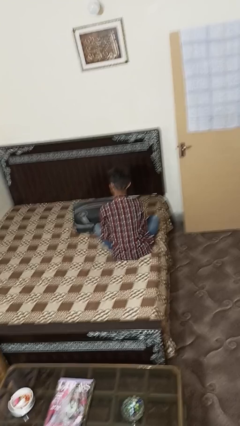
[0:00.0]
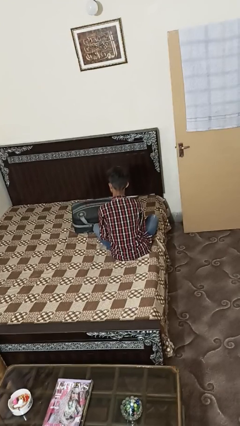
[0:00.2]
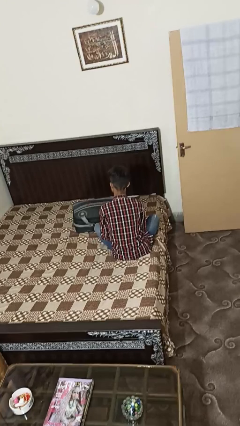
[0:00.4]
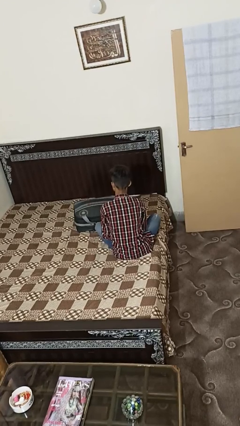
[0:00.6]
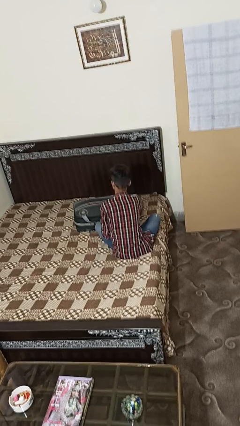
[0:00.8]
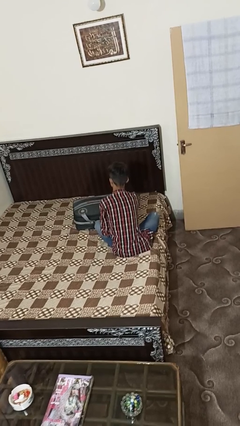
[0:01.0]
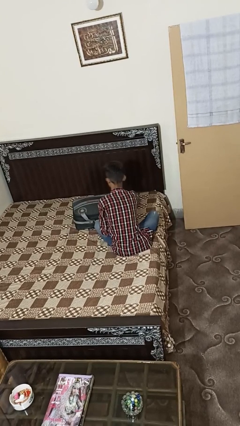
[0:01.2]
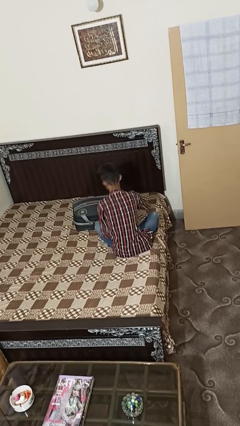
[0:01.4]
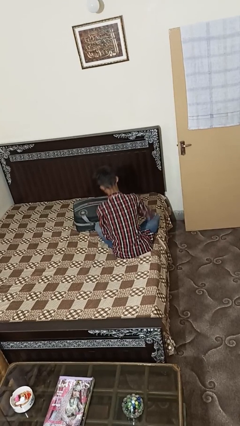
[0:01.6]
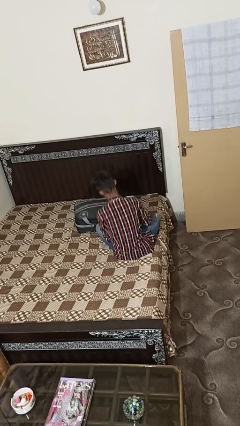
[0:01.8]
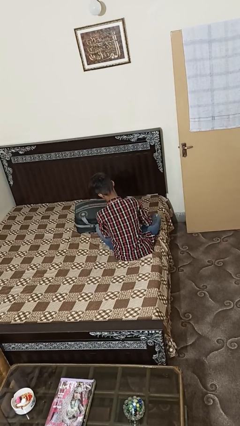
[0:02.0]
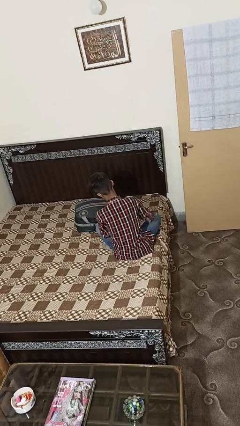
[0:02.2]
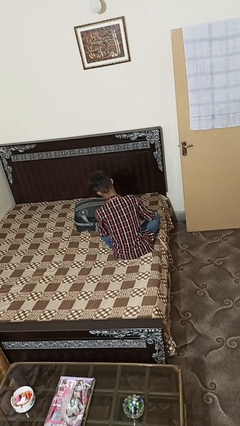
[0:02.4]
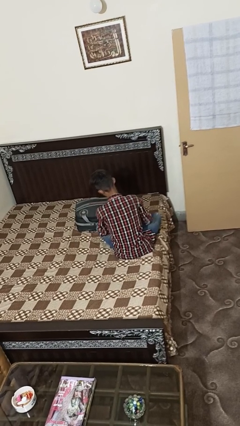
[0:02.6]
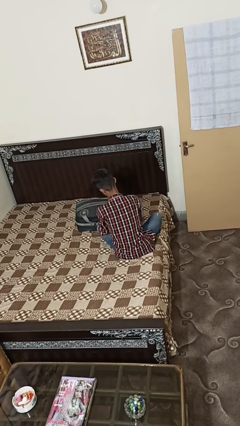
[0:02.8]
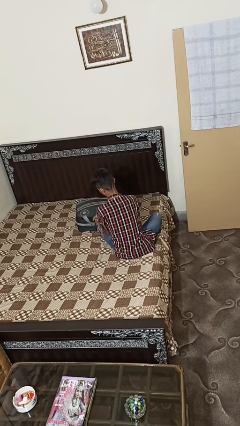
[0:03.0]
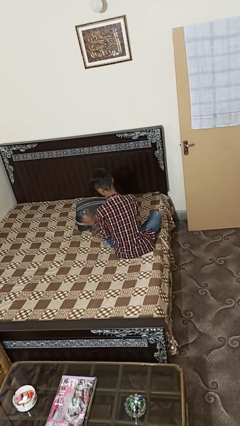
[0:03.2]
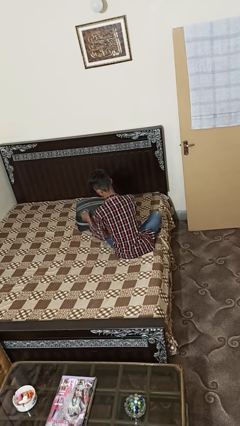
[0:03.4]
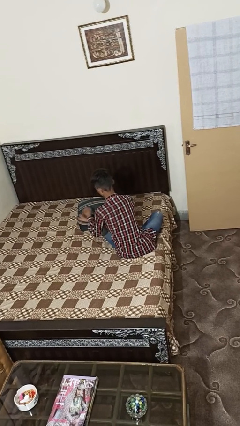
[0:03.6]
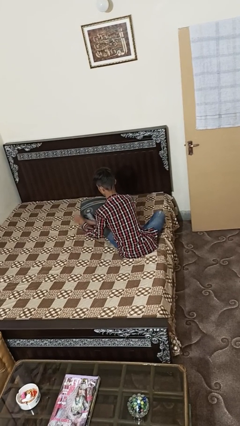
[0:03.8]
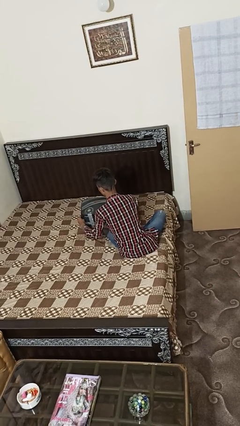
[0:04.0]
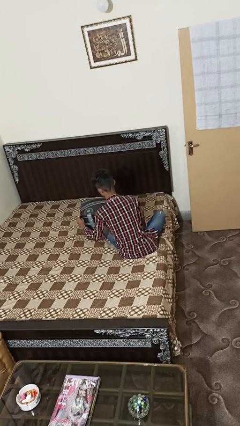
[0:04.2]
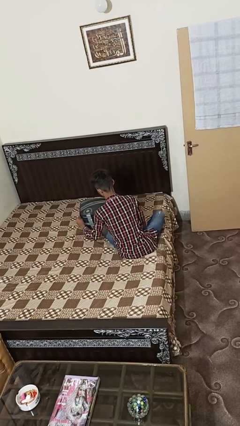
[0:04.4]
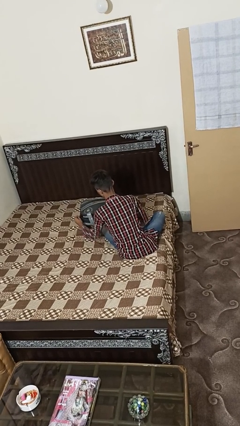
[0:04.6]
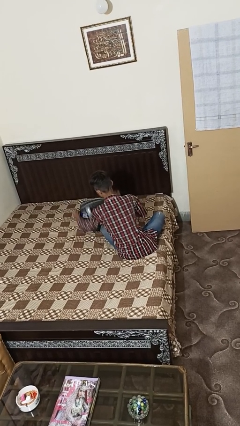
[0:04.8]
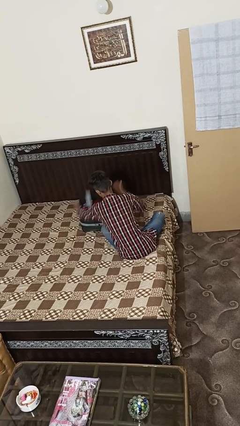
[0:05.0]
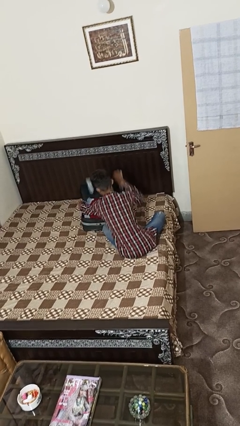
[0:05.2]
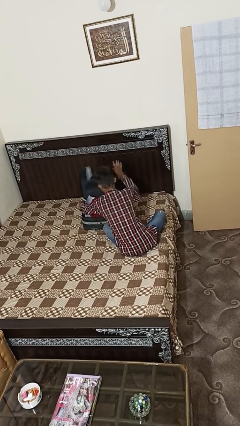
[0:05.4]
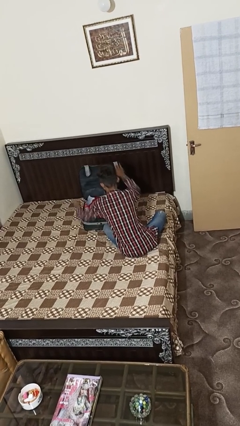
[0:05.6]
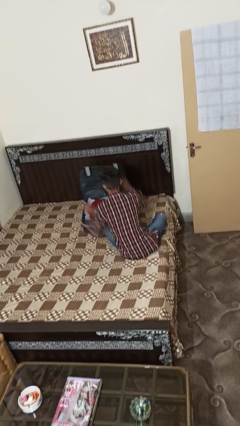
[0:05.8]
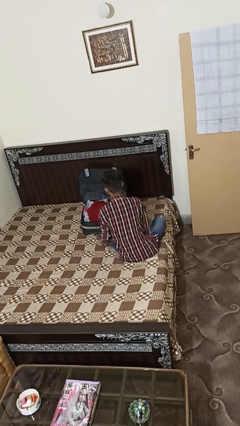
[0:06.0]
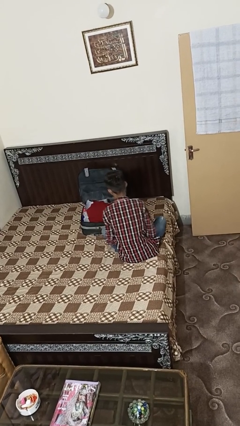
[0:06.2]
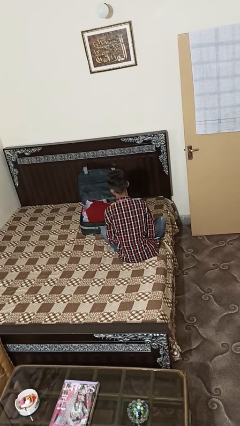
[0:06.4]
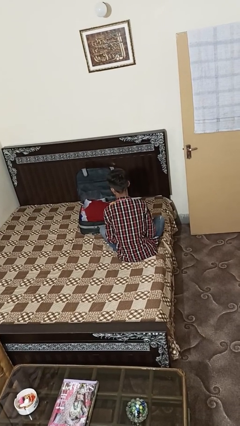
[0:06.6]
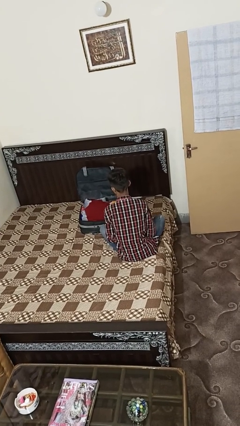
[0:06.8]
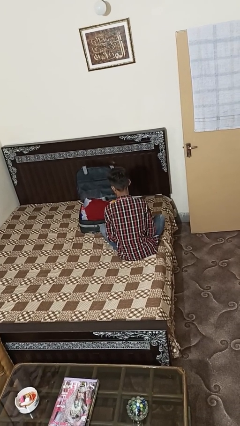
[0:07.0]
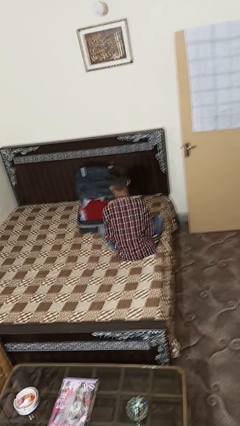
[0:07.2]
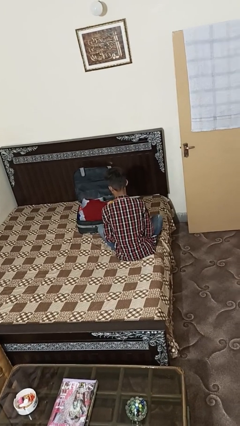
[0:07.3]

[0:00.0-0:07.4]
person opens suitcase

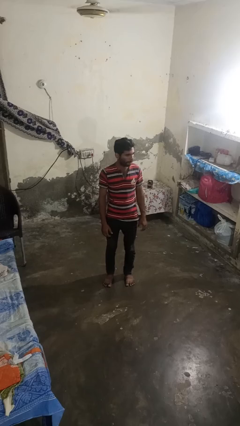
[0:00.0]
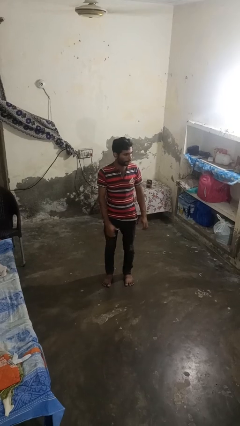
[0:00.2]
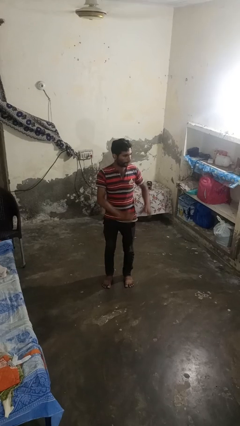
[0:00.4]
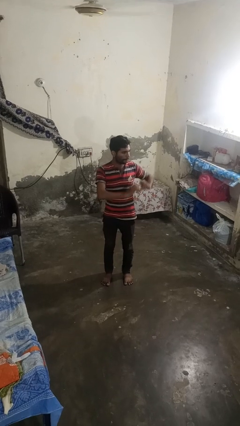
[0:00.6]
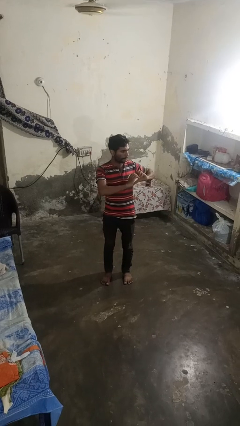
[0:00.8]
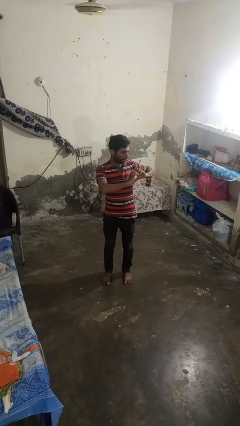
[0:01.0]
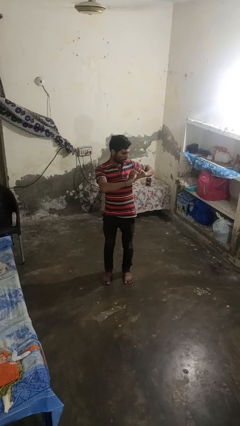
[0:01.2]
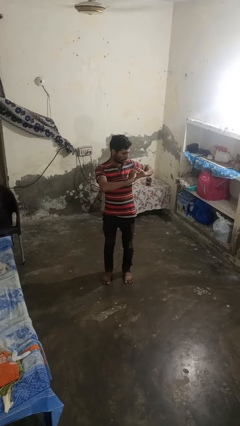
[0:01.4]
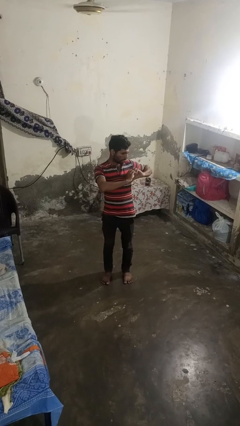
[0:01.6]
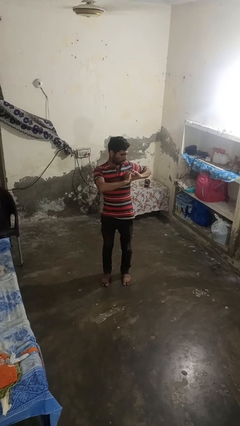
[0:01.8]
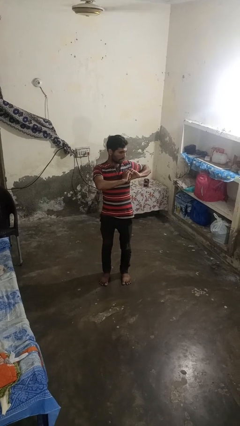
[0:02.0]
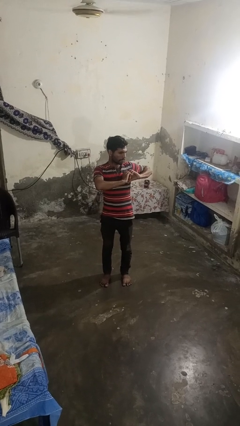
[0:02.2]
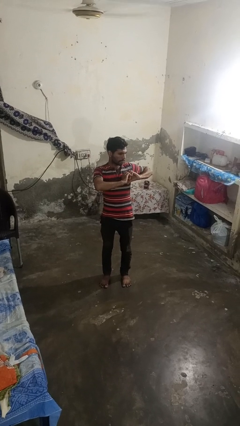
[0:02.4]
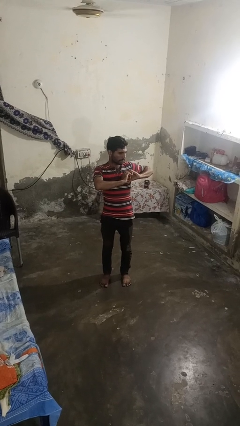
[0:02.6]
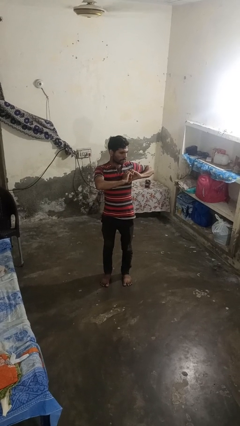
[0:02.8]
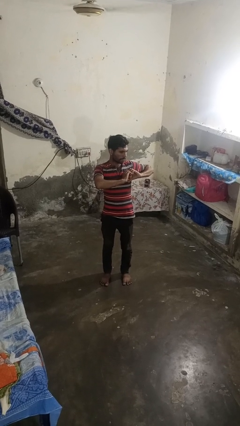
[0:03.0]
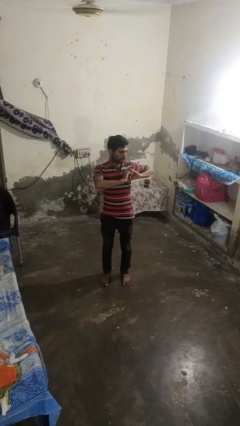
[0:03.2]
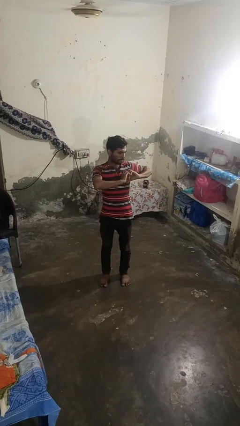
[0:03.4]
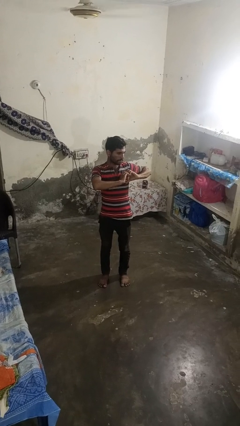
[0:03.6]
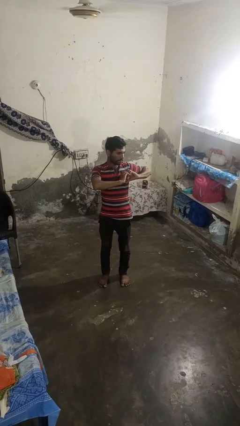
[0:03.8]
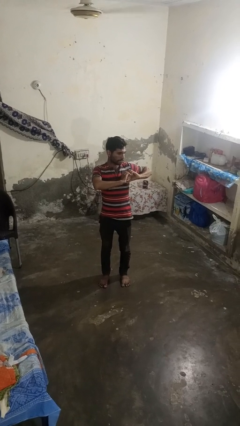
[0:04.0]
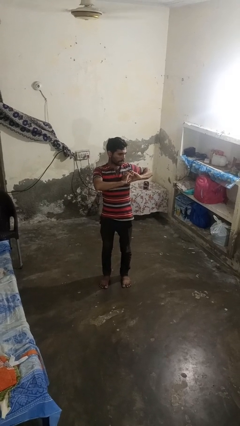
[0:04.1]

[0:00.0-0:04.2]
person gestures heart

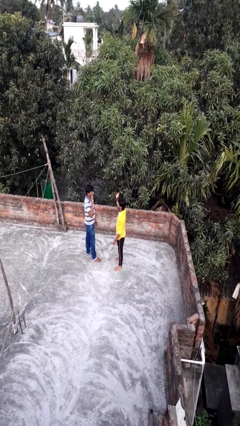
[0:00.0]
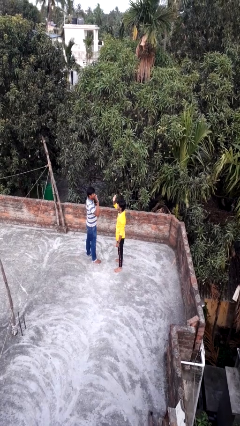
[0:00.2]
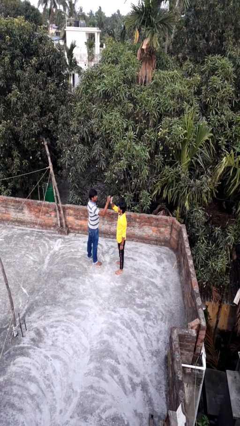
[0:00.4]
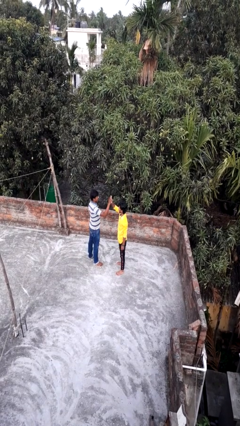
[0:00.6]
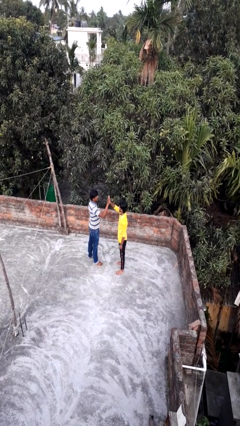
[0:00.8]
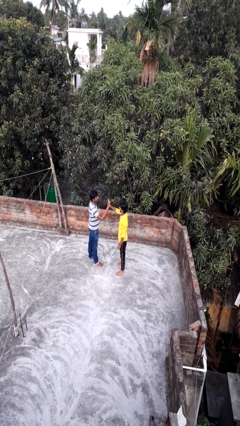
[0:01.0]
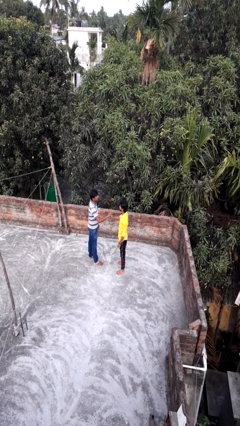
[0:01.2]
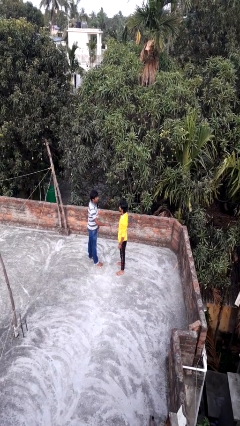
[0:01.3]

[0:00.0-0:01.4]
person highfives hand

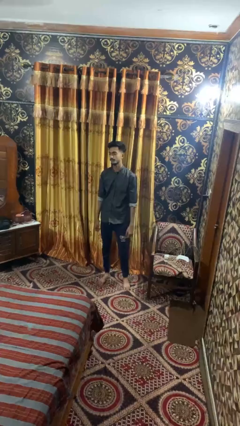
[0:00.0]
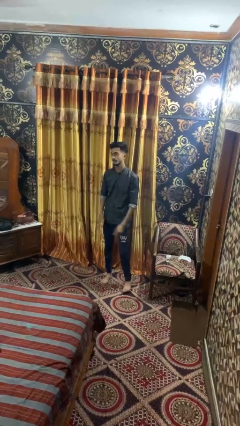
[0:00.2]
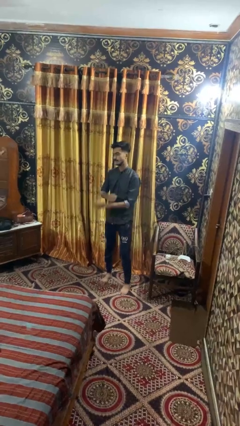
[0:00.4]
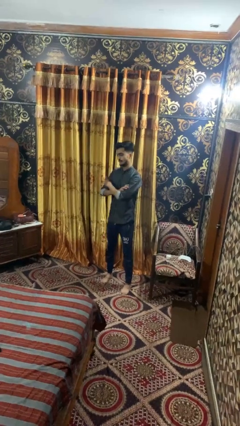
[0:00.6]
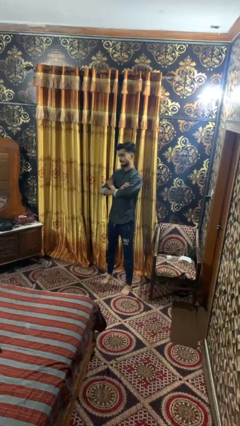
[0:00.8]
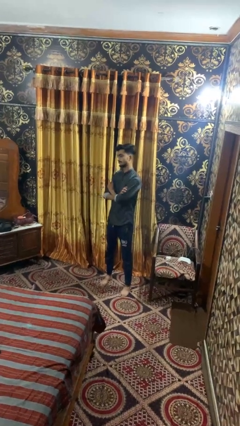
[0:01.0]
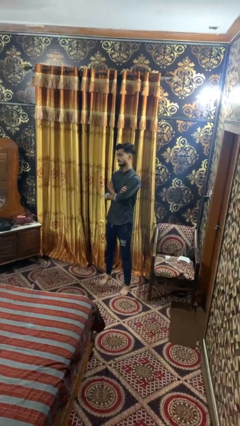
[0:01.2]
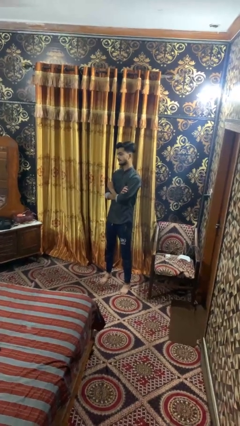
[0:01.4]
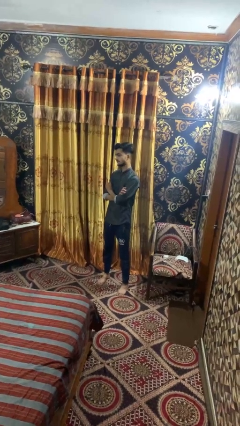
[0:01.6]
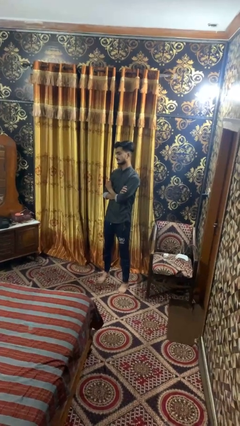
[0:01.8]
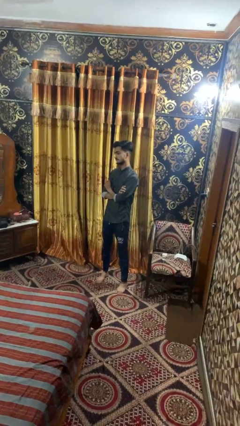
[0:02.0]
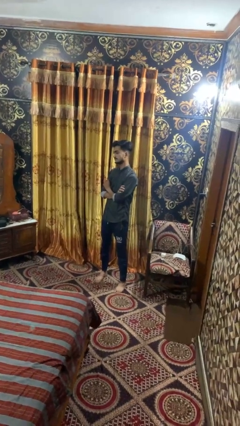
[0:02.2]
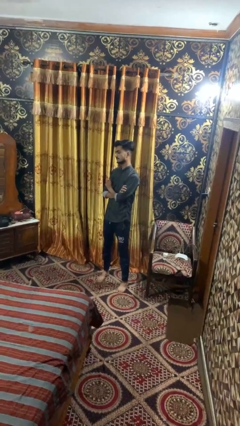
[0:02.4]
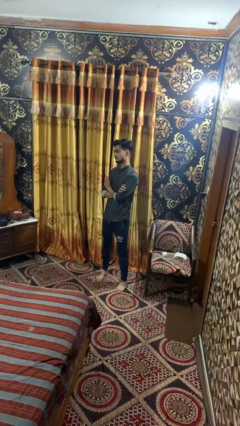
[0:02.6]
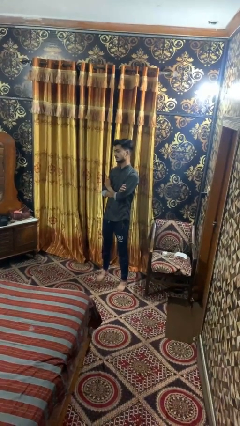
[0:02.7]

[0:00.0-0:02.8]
person crosses arms

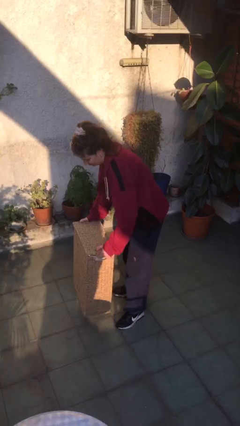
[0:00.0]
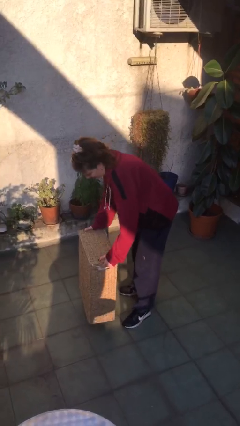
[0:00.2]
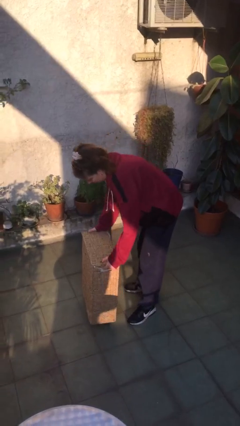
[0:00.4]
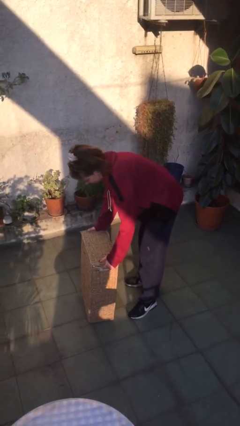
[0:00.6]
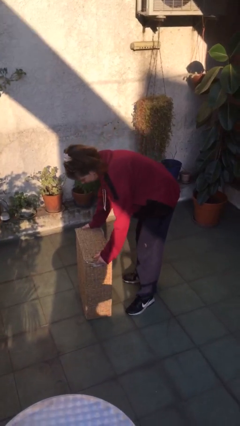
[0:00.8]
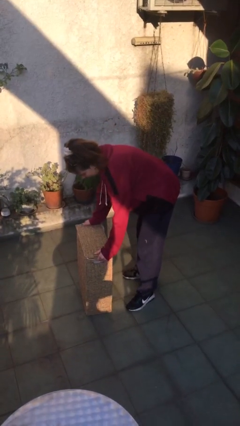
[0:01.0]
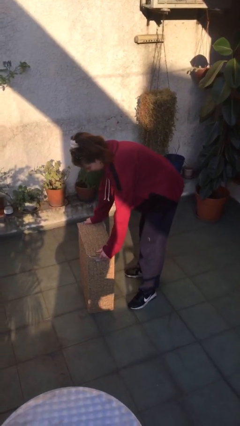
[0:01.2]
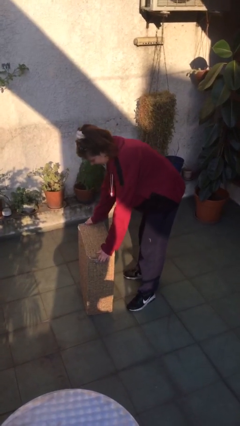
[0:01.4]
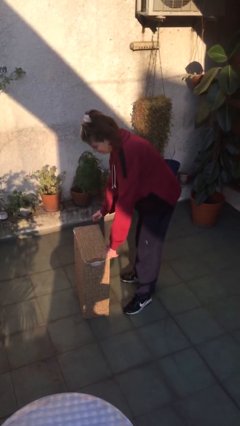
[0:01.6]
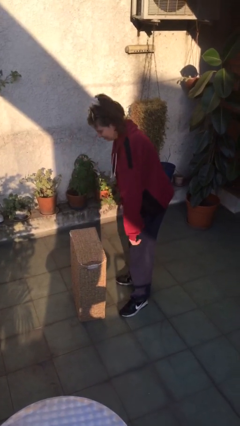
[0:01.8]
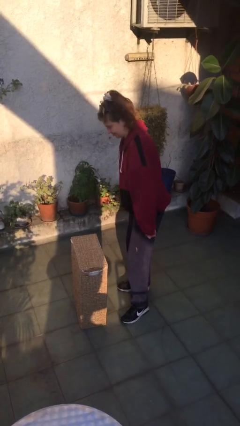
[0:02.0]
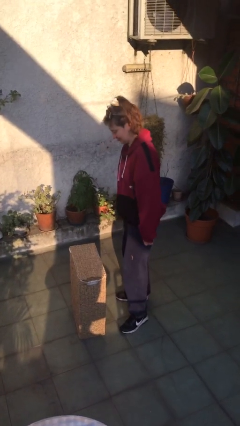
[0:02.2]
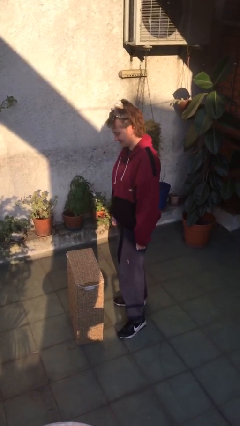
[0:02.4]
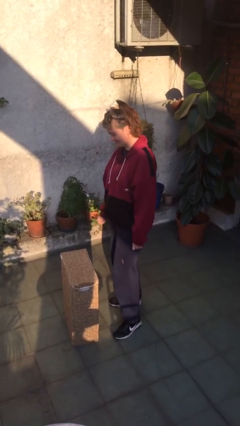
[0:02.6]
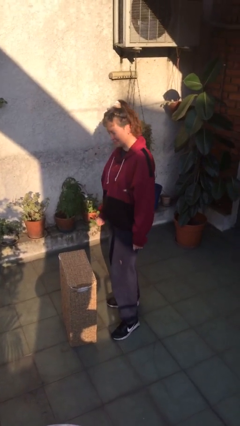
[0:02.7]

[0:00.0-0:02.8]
person puts down object on floor
